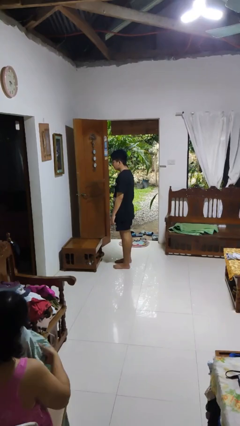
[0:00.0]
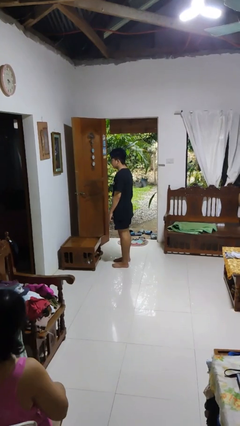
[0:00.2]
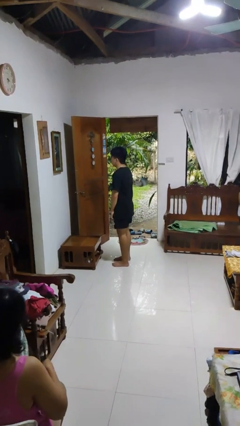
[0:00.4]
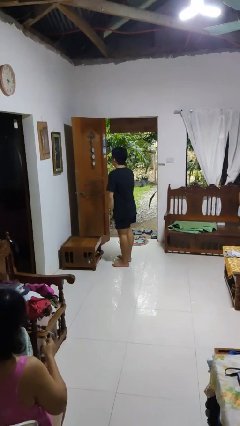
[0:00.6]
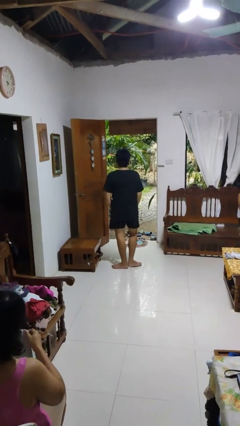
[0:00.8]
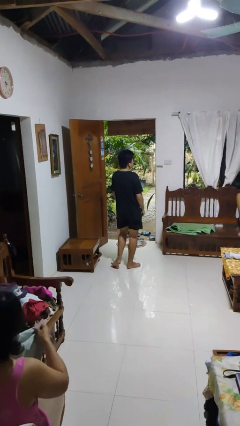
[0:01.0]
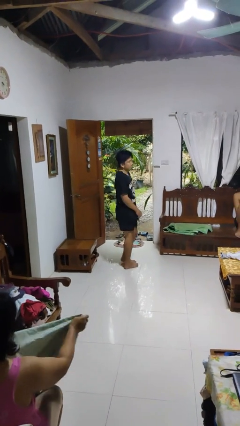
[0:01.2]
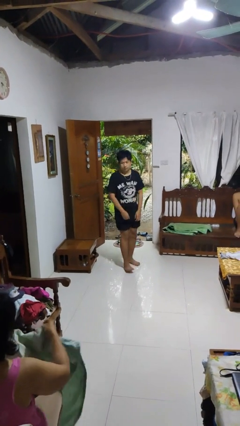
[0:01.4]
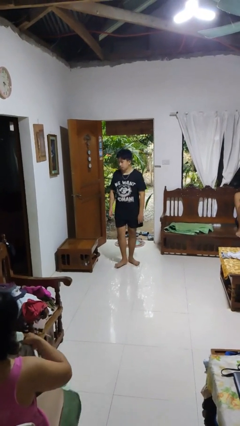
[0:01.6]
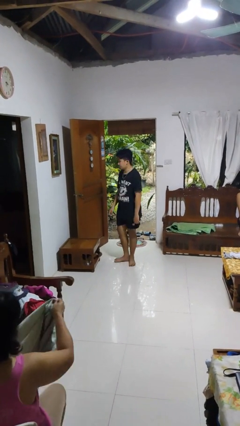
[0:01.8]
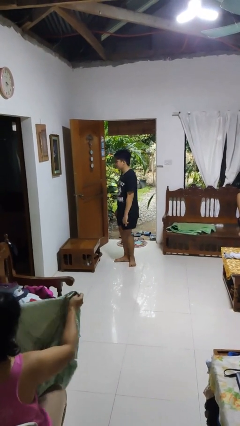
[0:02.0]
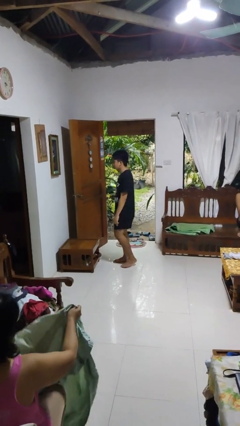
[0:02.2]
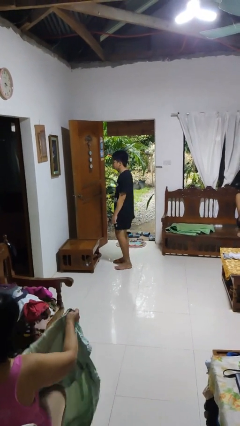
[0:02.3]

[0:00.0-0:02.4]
person twirls

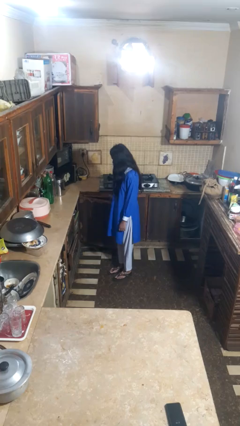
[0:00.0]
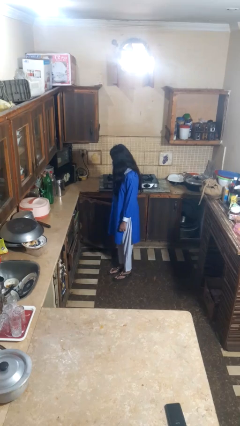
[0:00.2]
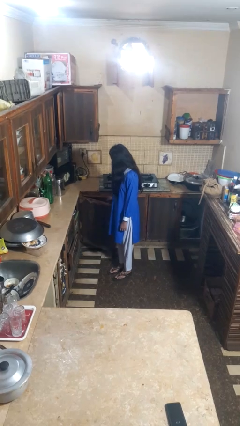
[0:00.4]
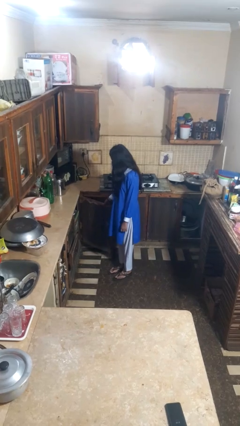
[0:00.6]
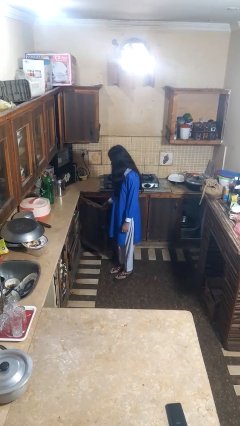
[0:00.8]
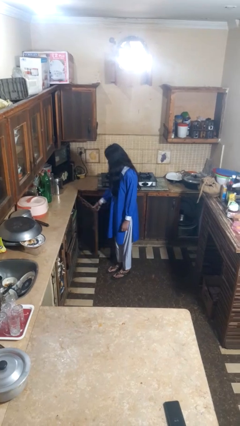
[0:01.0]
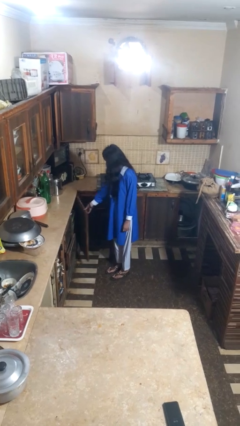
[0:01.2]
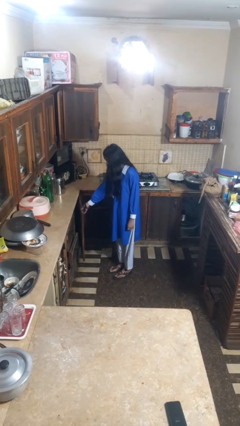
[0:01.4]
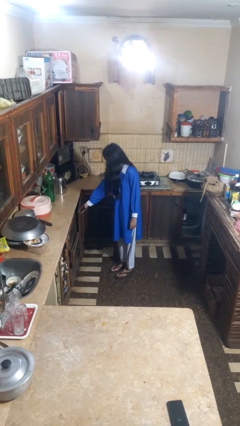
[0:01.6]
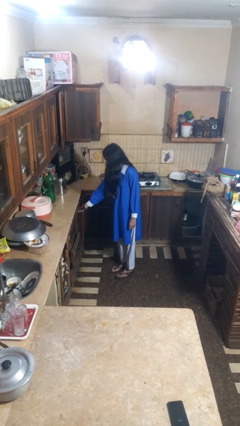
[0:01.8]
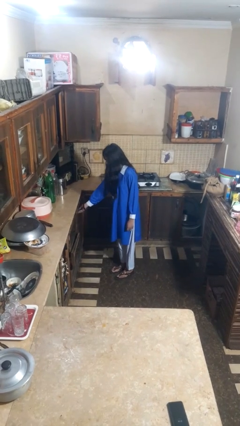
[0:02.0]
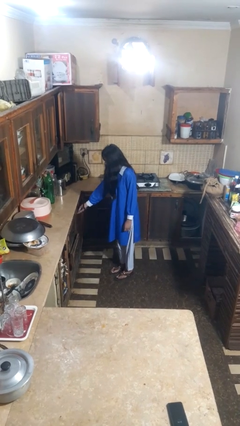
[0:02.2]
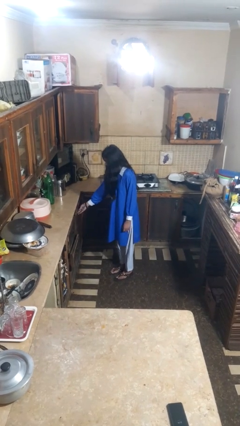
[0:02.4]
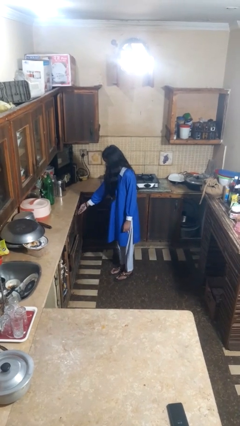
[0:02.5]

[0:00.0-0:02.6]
person closes closet door

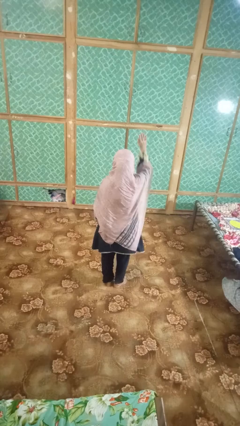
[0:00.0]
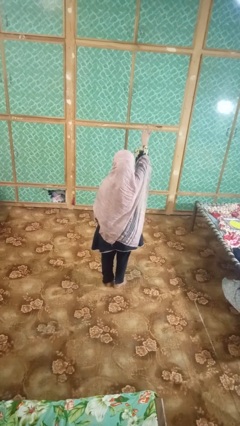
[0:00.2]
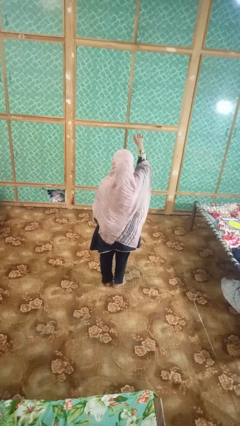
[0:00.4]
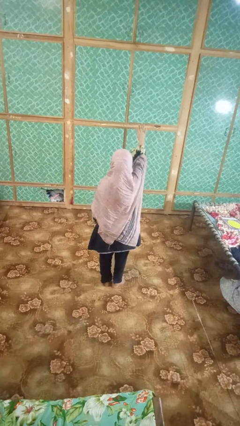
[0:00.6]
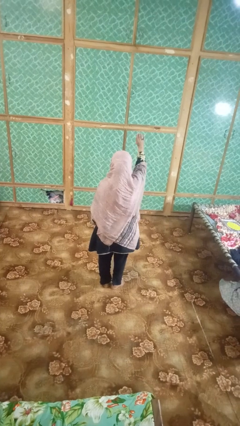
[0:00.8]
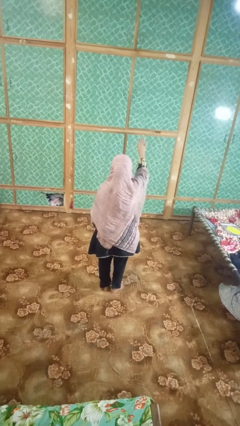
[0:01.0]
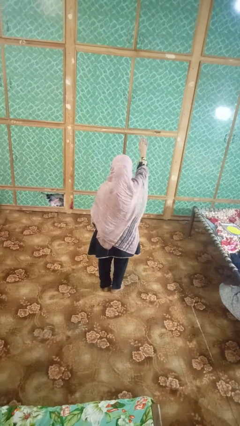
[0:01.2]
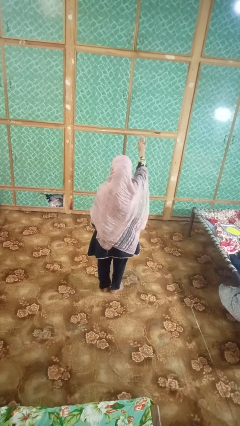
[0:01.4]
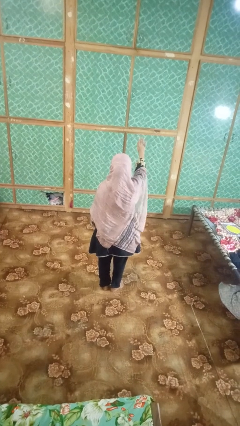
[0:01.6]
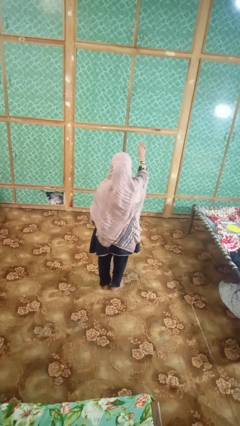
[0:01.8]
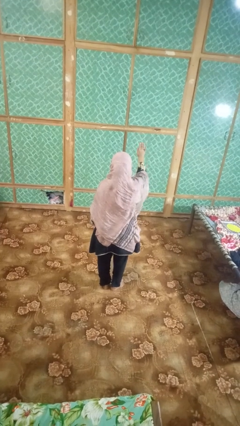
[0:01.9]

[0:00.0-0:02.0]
person gestures stop

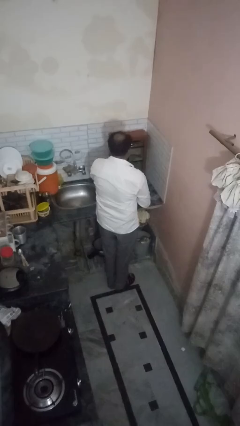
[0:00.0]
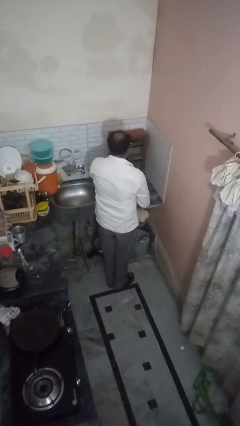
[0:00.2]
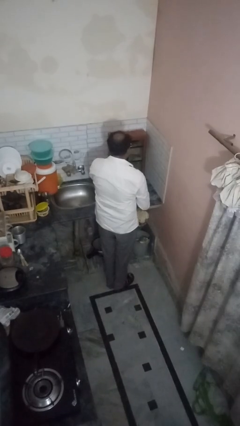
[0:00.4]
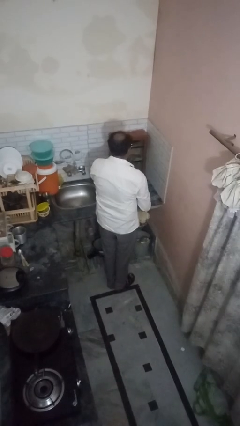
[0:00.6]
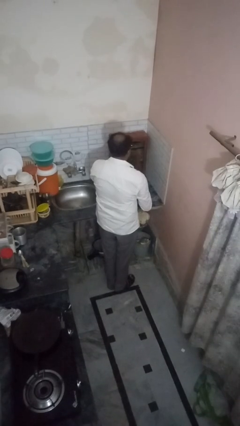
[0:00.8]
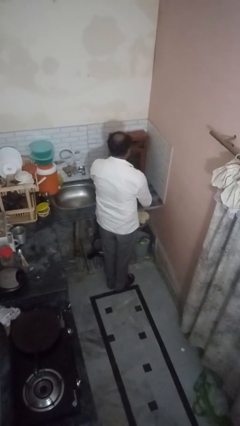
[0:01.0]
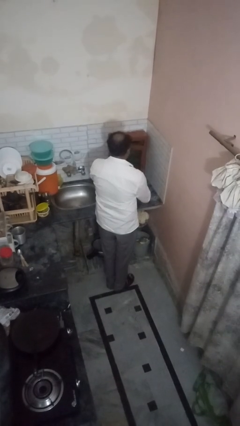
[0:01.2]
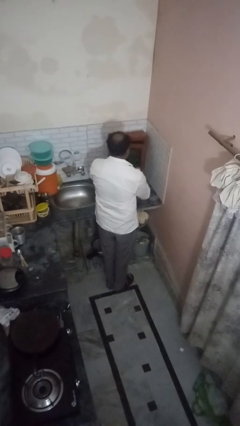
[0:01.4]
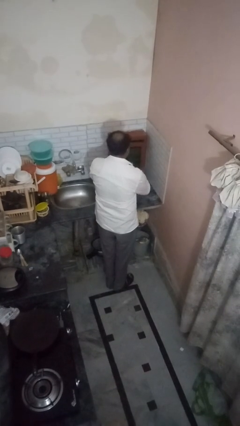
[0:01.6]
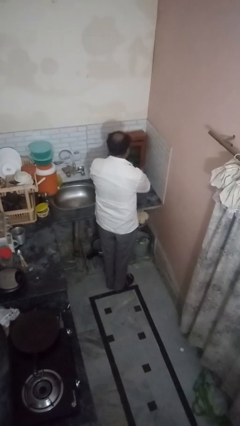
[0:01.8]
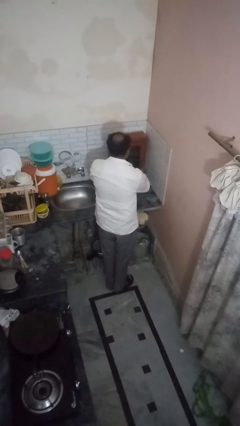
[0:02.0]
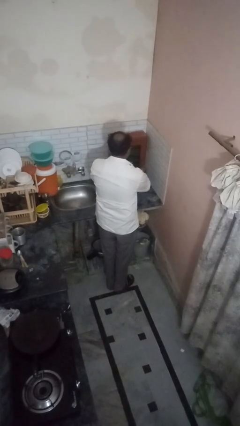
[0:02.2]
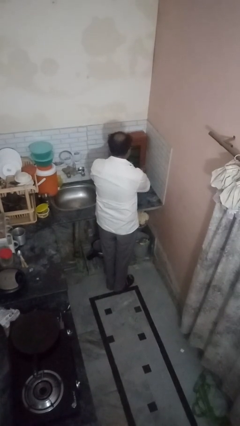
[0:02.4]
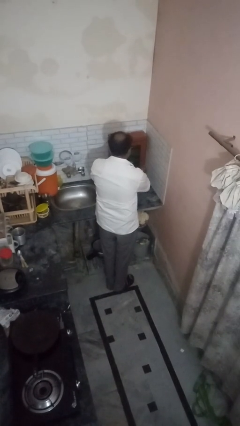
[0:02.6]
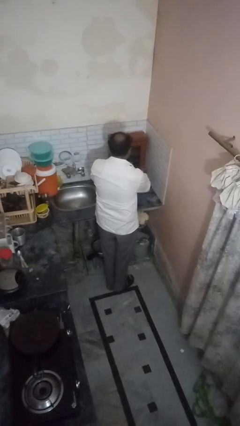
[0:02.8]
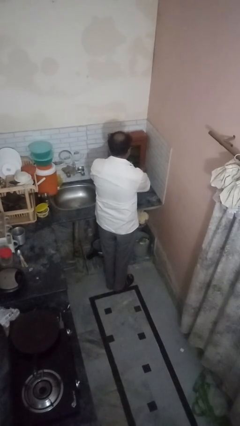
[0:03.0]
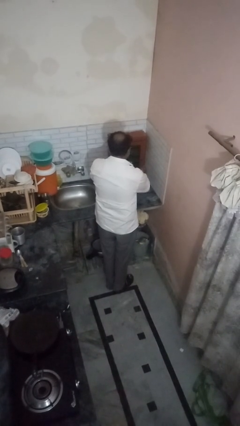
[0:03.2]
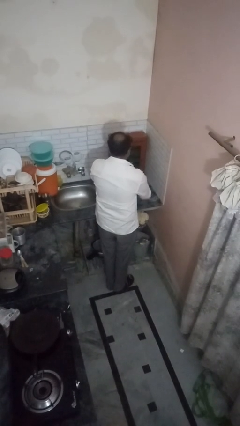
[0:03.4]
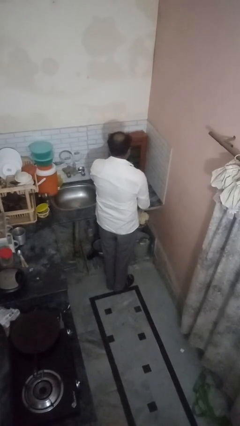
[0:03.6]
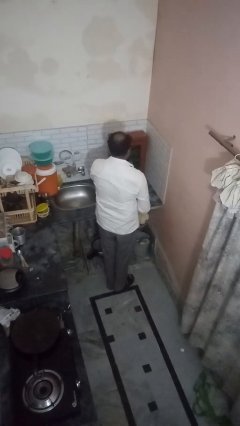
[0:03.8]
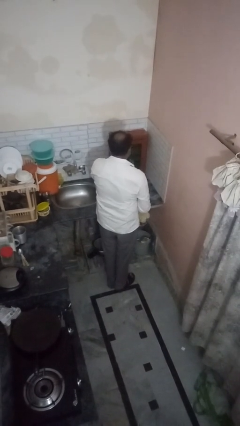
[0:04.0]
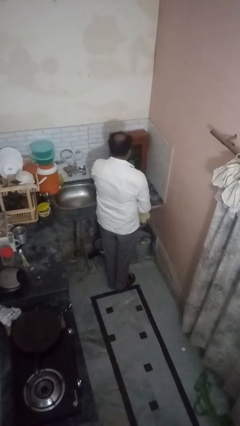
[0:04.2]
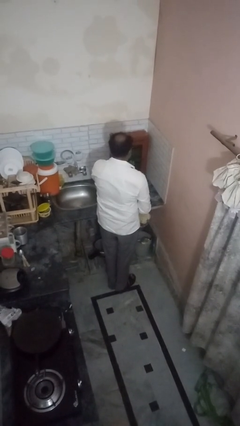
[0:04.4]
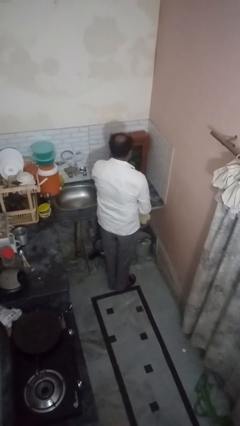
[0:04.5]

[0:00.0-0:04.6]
person closes kitchen drawer

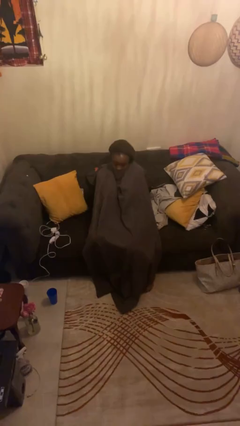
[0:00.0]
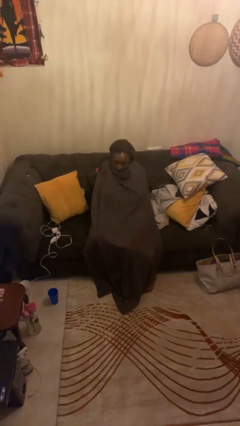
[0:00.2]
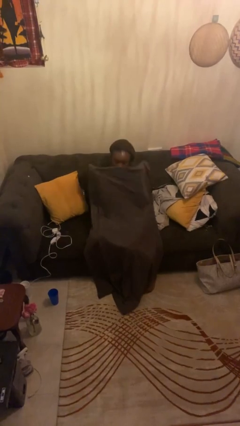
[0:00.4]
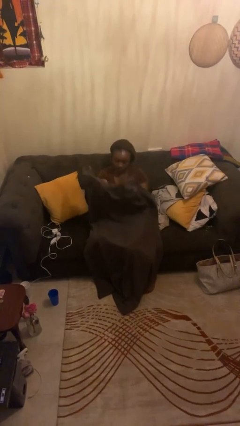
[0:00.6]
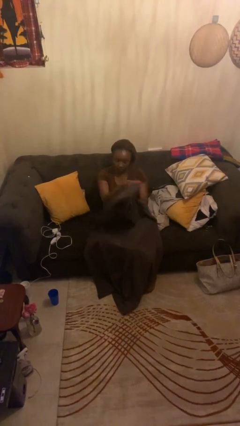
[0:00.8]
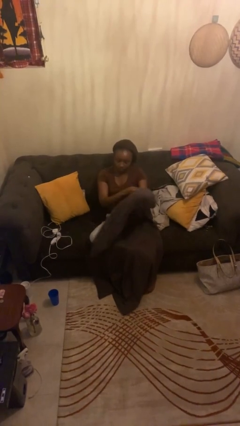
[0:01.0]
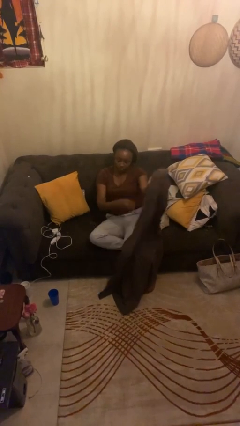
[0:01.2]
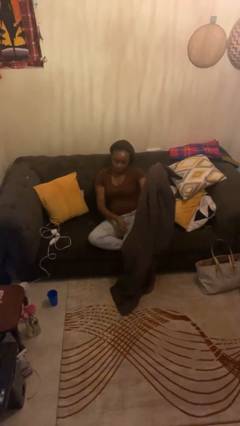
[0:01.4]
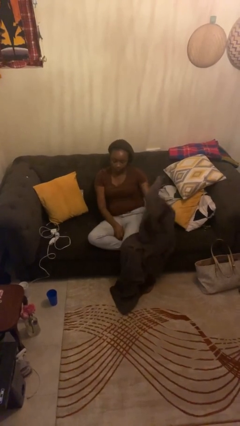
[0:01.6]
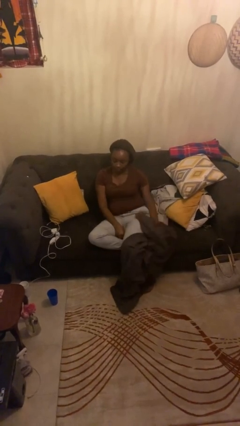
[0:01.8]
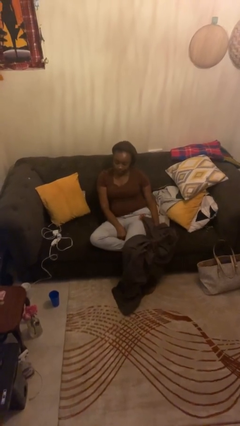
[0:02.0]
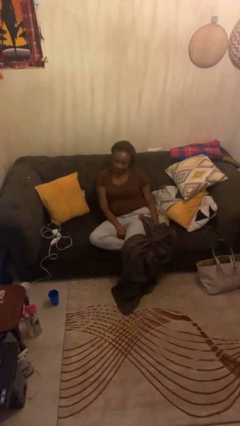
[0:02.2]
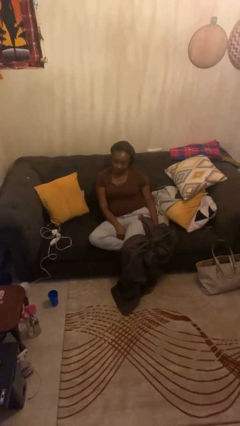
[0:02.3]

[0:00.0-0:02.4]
person uncovers with blanket

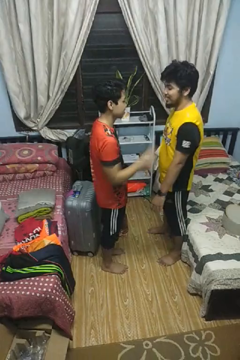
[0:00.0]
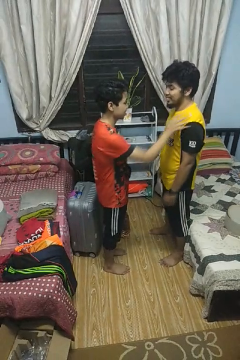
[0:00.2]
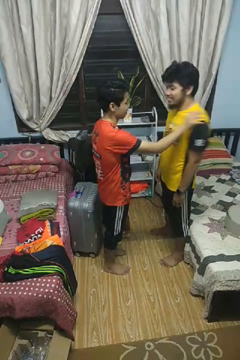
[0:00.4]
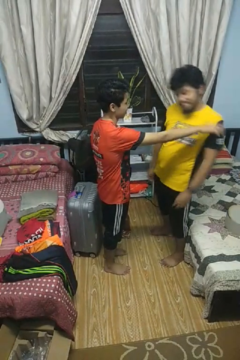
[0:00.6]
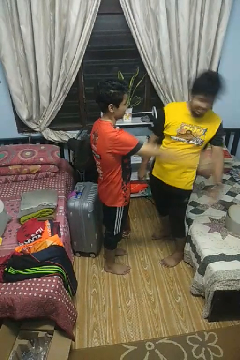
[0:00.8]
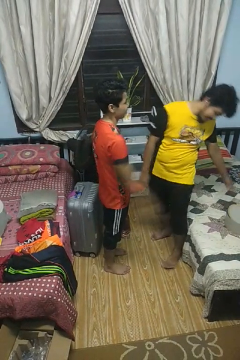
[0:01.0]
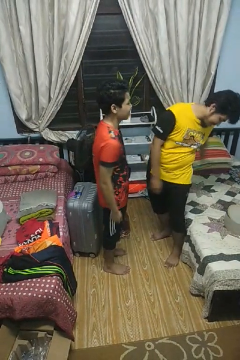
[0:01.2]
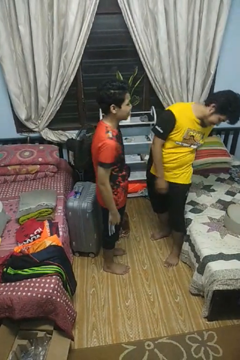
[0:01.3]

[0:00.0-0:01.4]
person shoves person

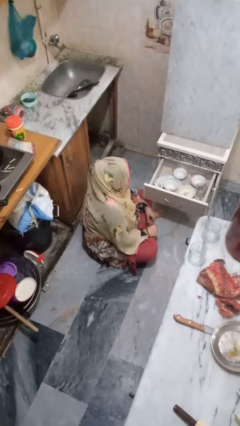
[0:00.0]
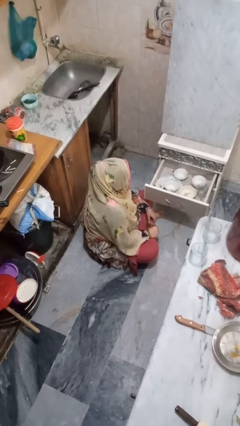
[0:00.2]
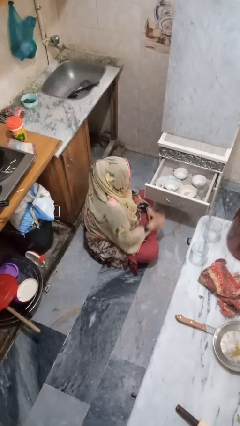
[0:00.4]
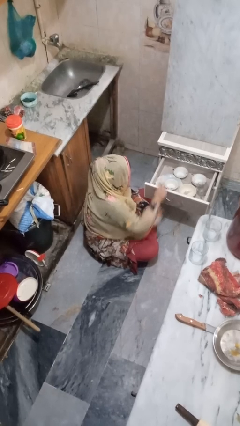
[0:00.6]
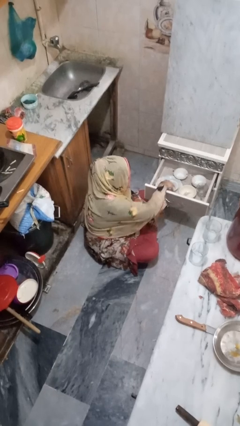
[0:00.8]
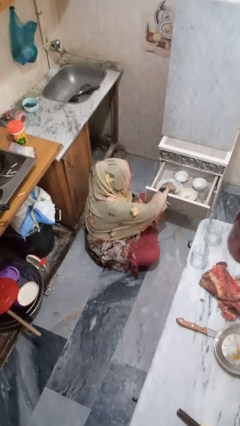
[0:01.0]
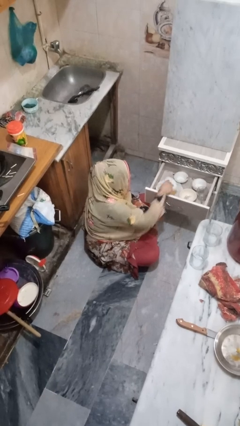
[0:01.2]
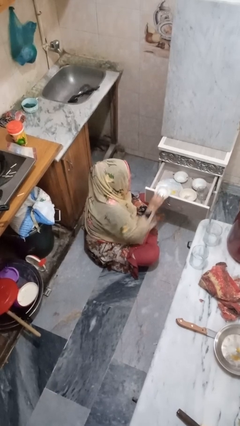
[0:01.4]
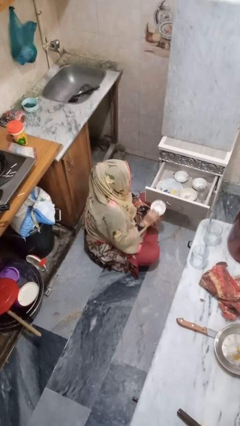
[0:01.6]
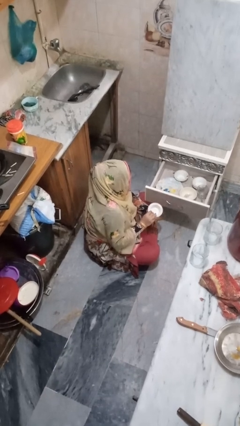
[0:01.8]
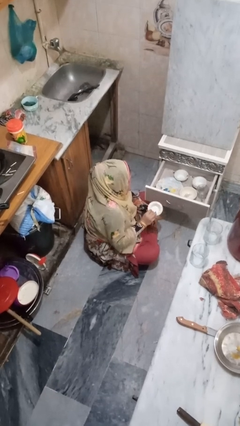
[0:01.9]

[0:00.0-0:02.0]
person takes object from kitchen drawer
